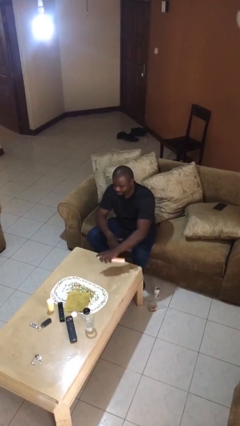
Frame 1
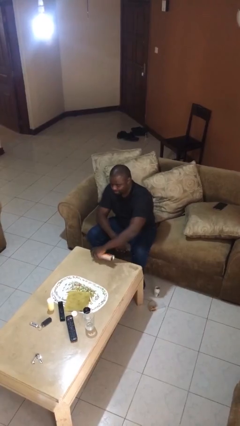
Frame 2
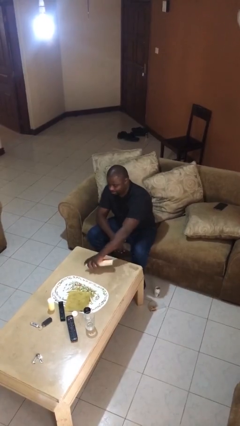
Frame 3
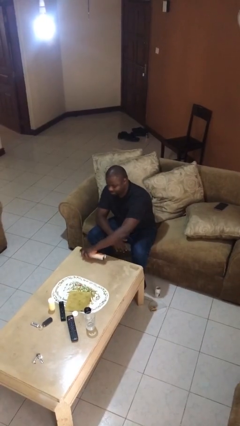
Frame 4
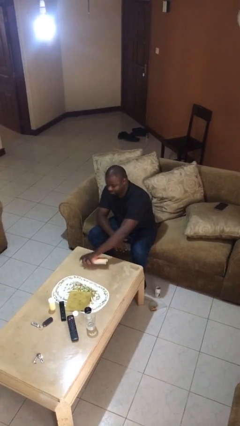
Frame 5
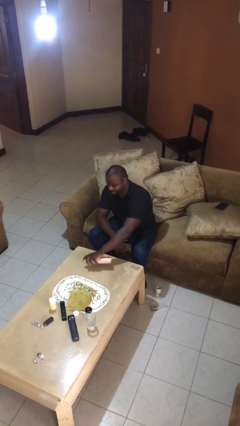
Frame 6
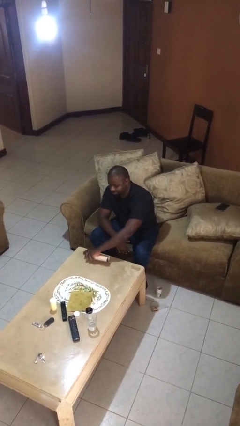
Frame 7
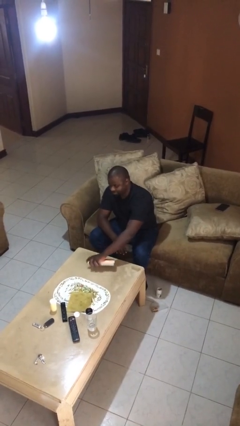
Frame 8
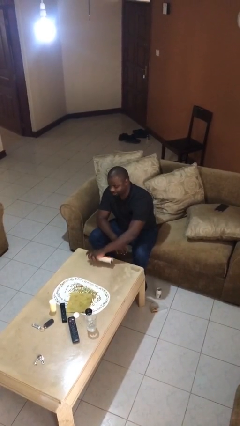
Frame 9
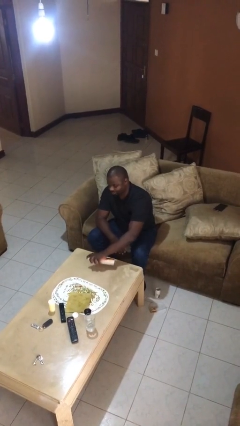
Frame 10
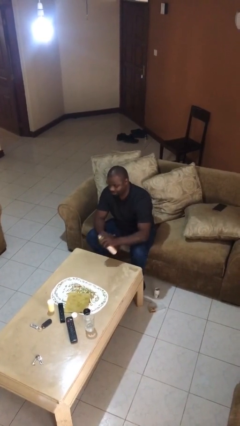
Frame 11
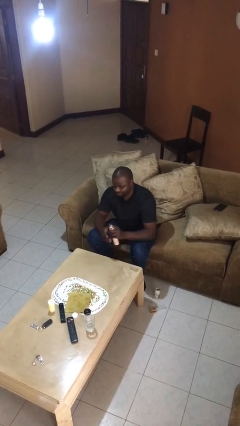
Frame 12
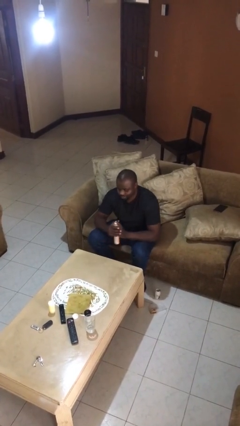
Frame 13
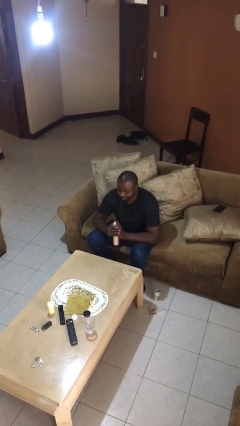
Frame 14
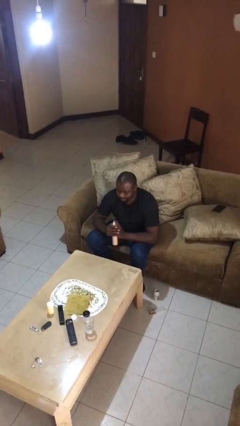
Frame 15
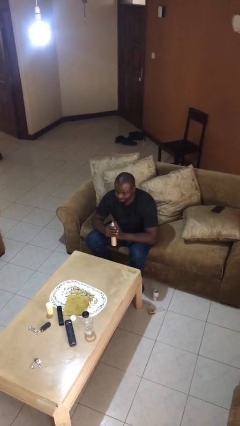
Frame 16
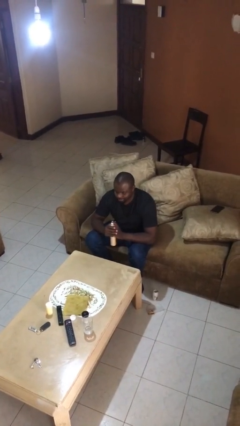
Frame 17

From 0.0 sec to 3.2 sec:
person sprays from bottle

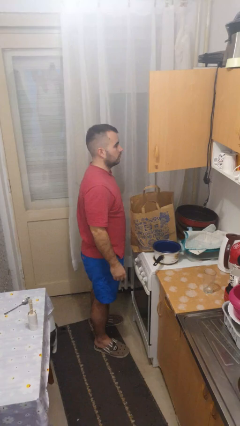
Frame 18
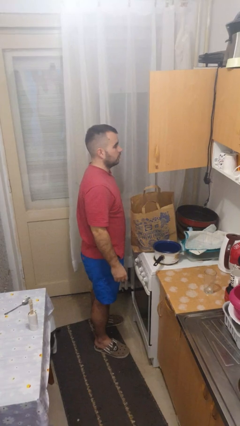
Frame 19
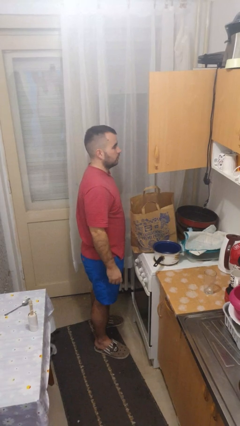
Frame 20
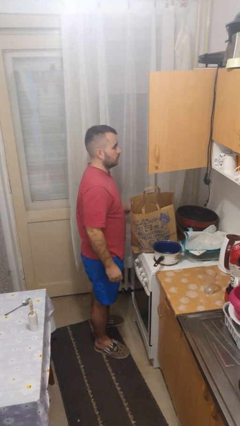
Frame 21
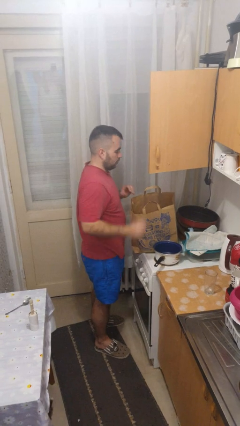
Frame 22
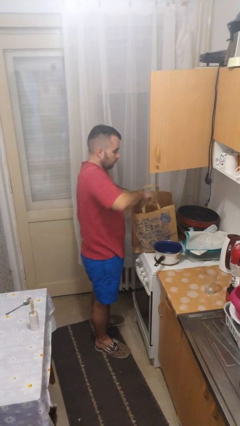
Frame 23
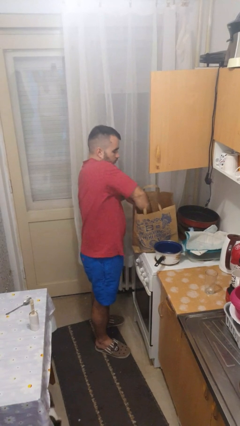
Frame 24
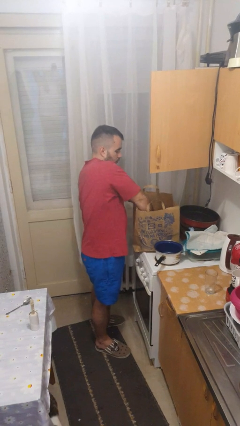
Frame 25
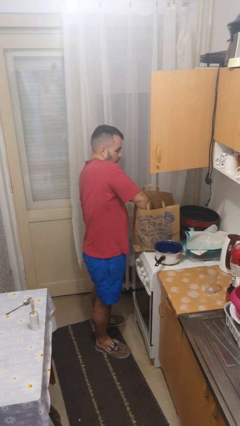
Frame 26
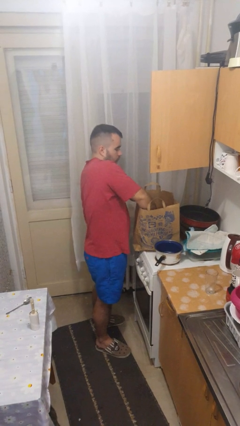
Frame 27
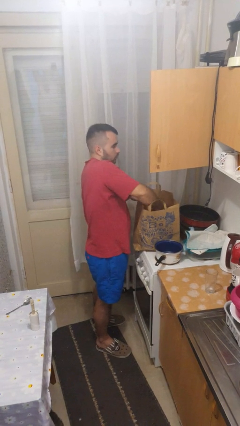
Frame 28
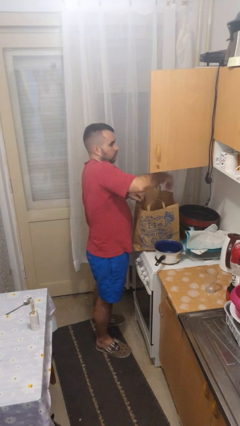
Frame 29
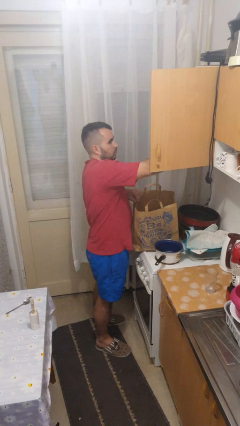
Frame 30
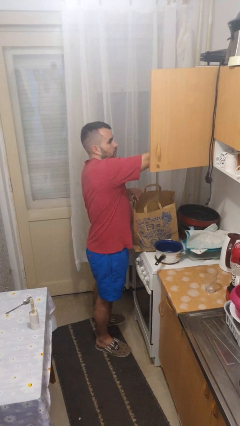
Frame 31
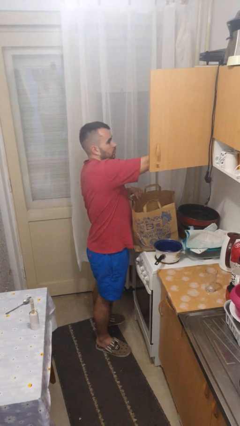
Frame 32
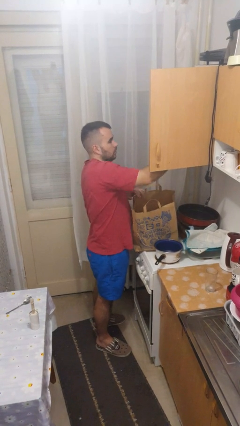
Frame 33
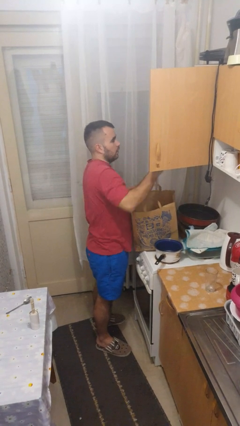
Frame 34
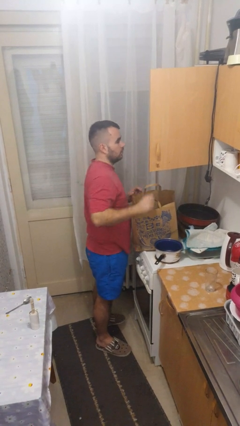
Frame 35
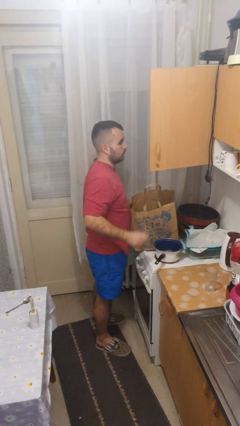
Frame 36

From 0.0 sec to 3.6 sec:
person loads groceries into cabinet

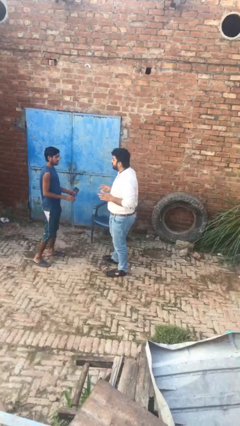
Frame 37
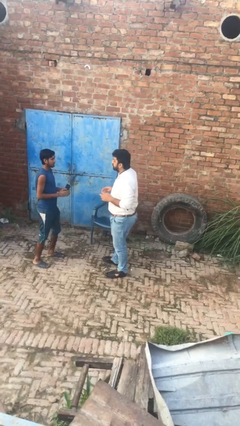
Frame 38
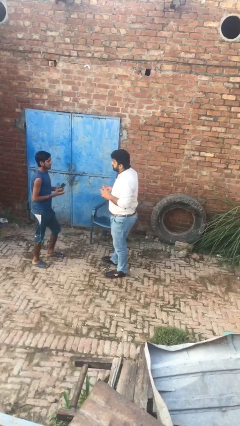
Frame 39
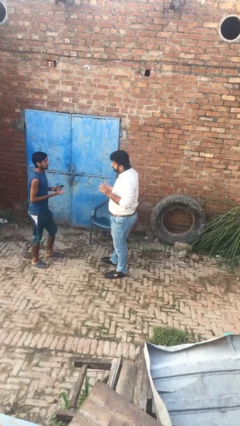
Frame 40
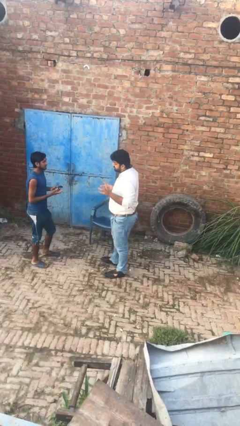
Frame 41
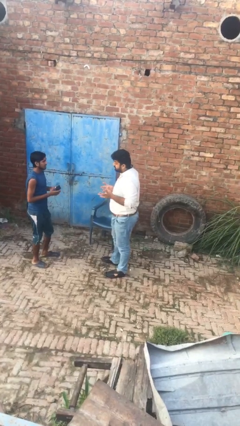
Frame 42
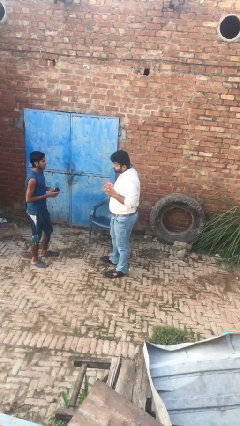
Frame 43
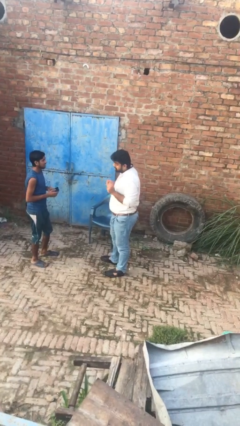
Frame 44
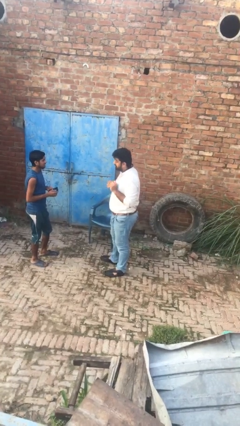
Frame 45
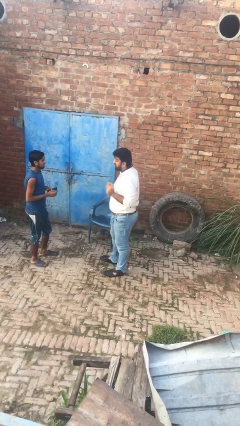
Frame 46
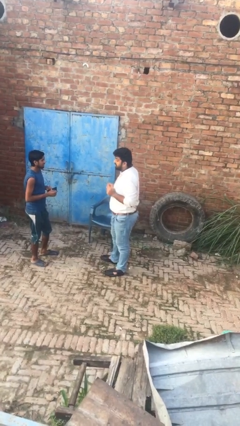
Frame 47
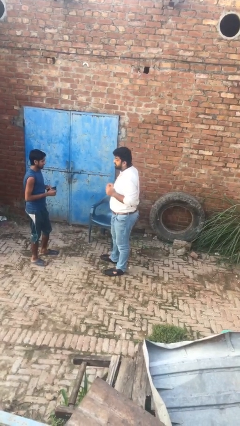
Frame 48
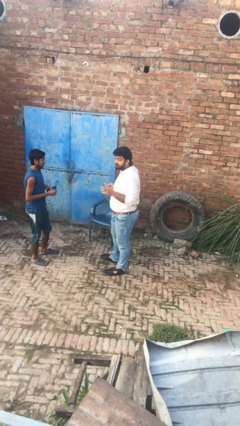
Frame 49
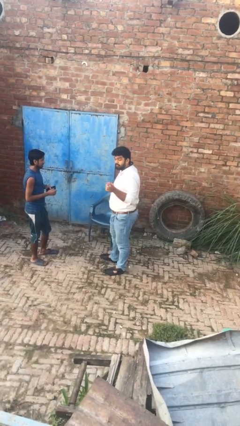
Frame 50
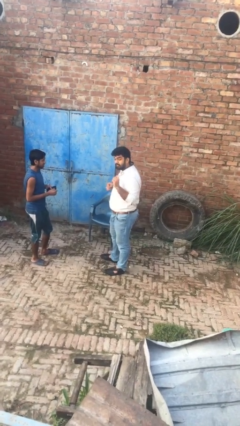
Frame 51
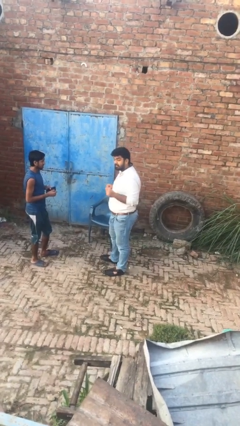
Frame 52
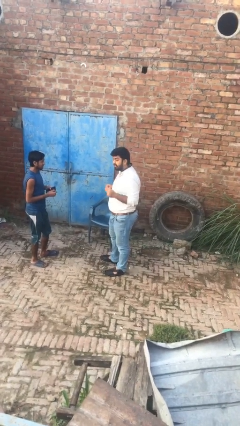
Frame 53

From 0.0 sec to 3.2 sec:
person talks to person

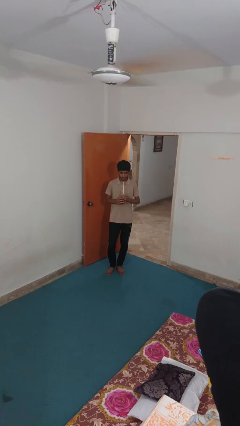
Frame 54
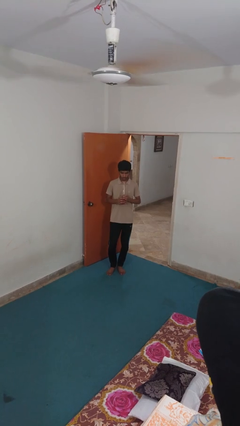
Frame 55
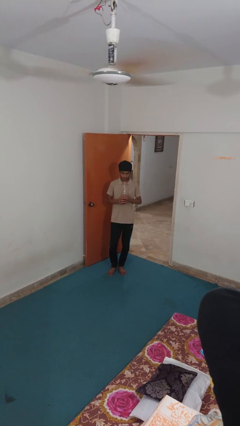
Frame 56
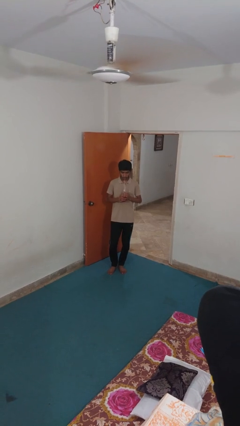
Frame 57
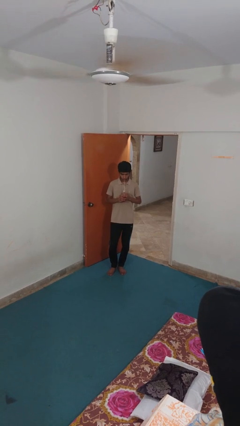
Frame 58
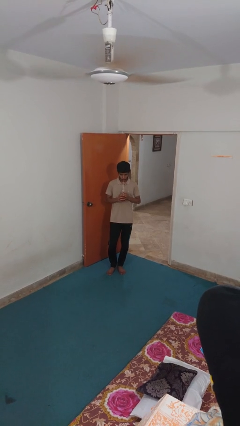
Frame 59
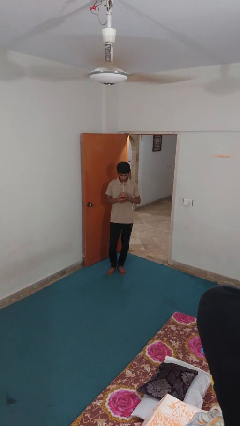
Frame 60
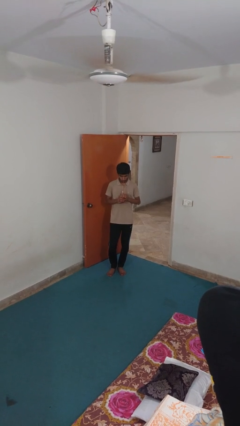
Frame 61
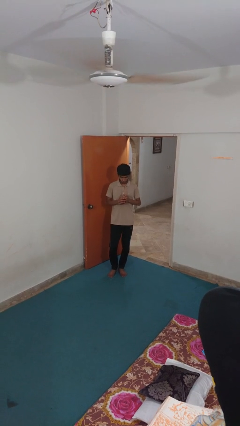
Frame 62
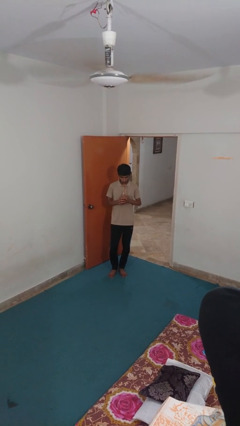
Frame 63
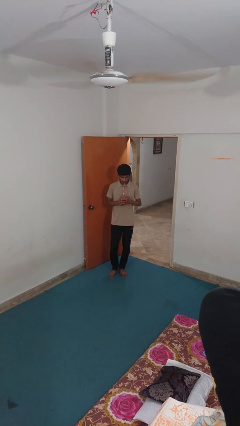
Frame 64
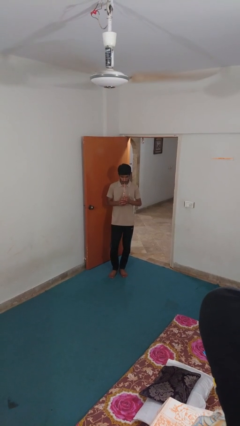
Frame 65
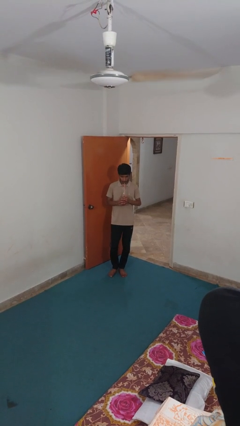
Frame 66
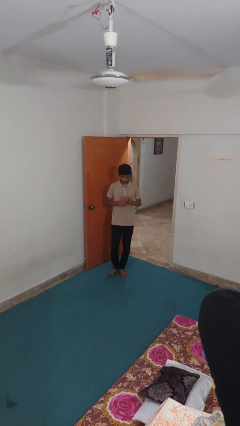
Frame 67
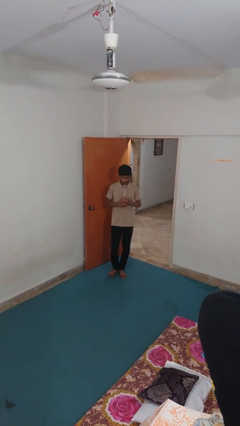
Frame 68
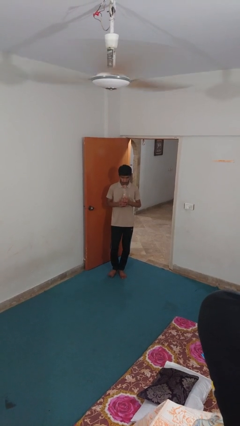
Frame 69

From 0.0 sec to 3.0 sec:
person drinks from straw

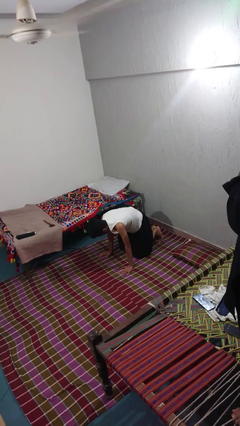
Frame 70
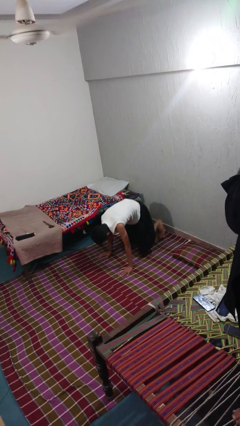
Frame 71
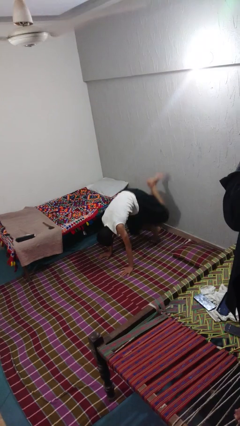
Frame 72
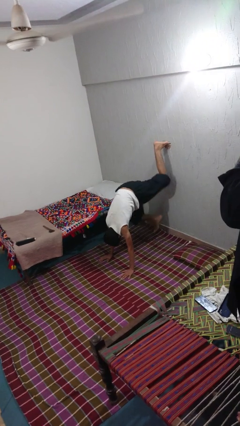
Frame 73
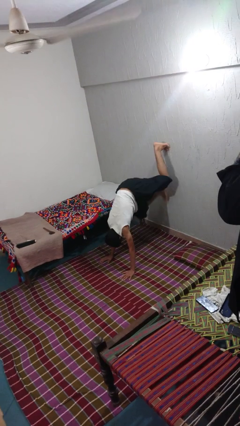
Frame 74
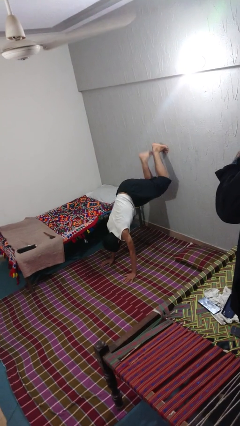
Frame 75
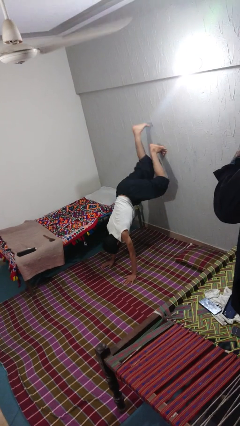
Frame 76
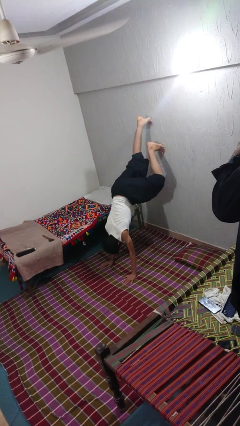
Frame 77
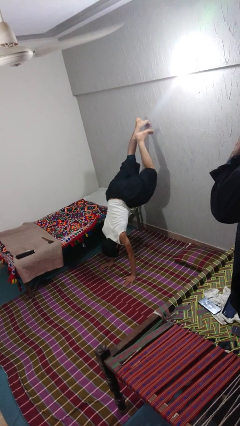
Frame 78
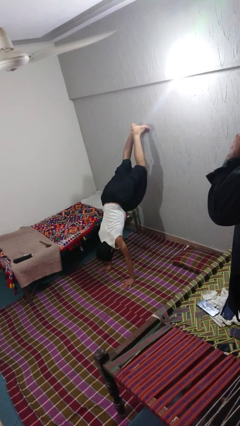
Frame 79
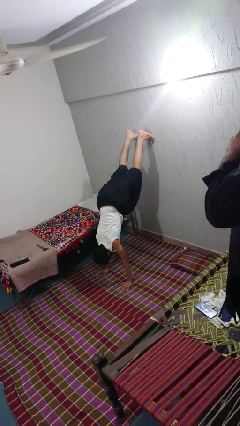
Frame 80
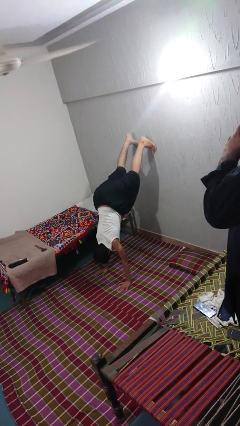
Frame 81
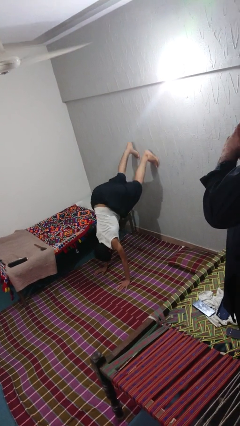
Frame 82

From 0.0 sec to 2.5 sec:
person handstand

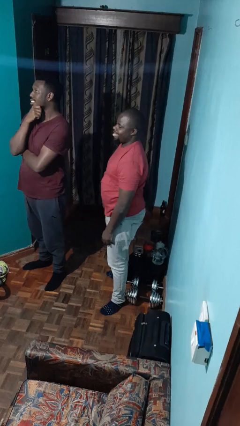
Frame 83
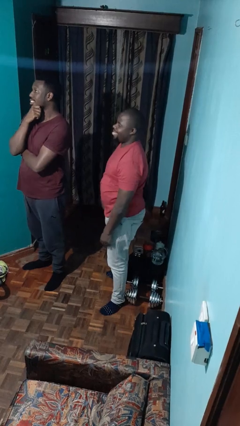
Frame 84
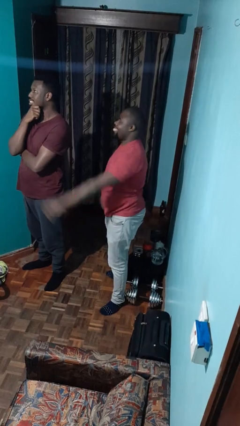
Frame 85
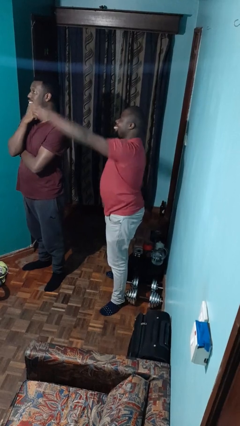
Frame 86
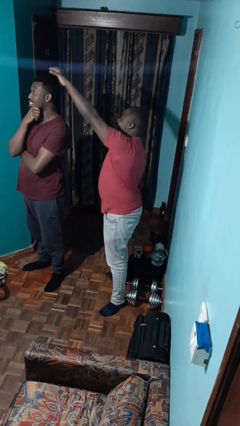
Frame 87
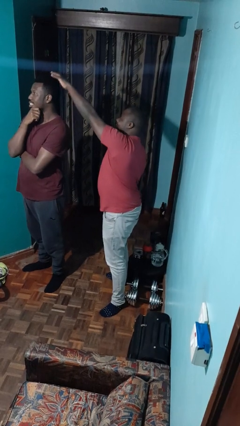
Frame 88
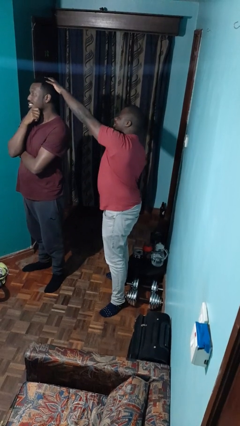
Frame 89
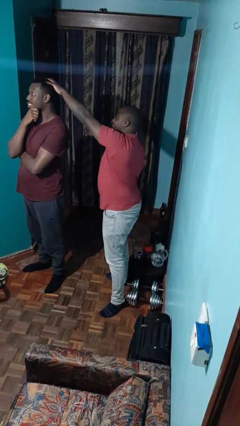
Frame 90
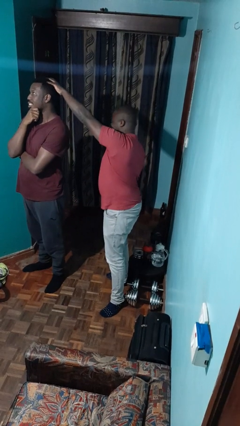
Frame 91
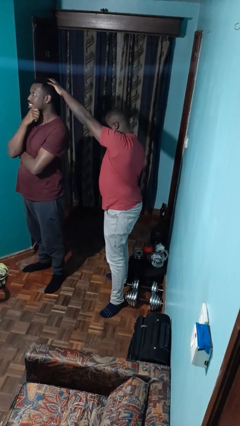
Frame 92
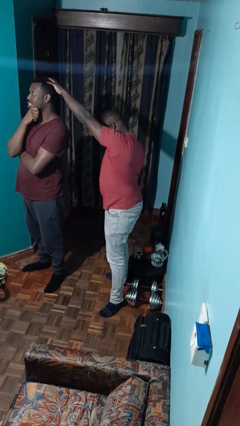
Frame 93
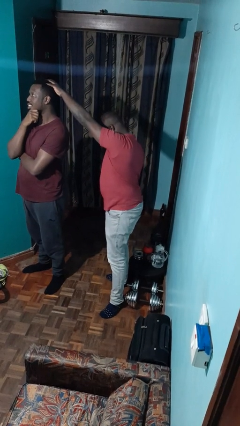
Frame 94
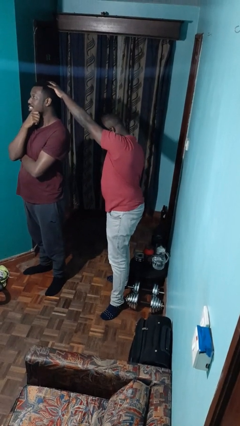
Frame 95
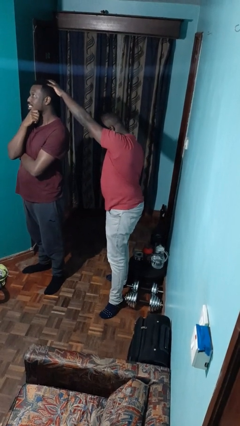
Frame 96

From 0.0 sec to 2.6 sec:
person grabs person by hair
